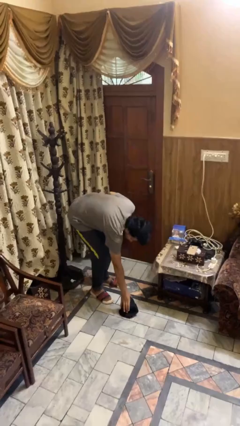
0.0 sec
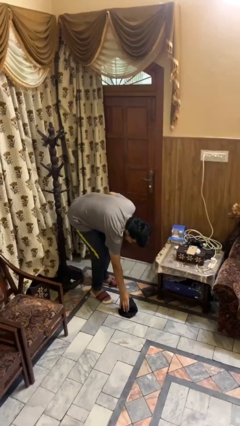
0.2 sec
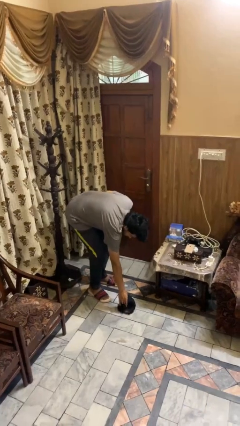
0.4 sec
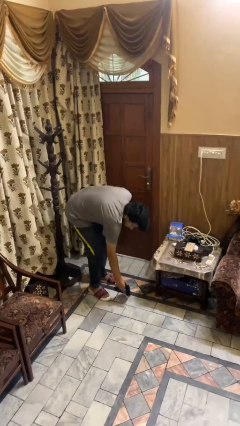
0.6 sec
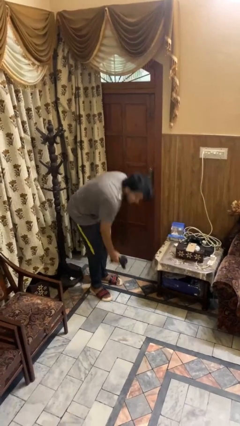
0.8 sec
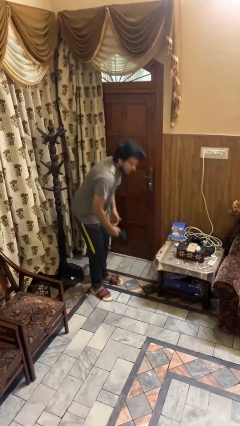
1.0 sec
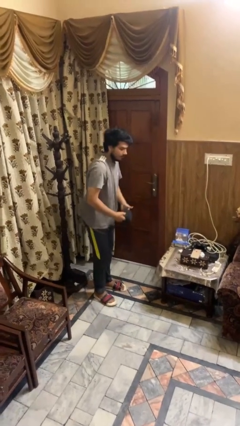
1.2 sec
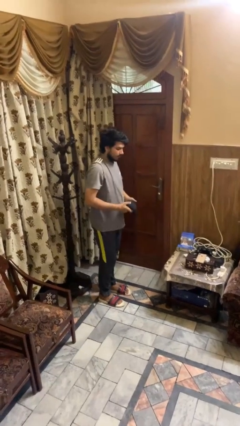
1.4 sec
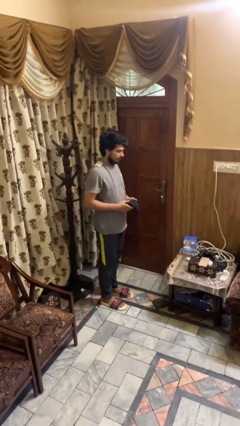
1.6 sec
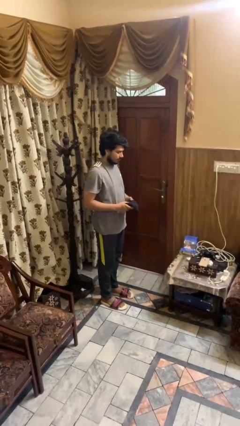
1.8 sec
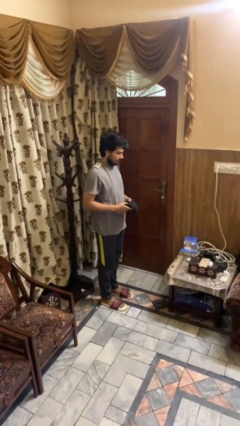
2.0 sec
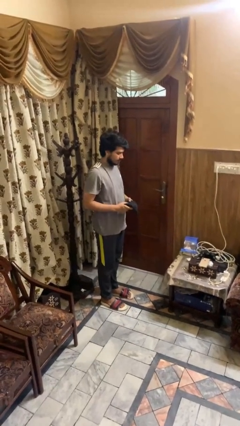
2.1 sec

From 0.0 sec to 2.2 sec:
person picks up object from floor

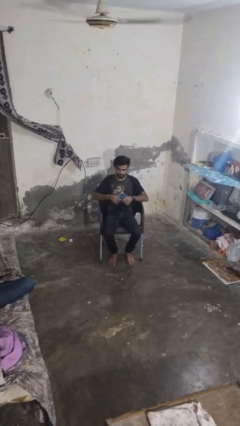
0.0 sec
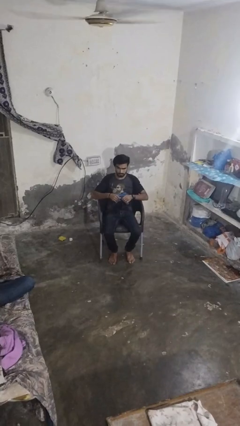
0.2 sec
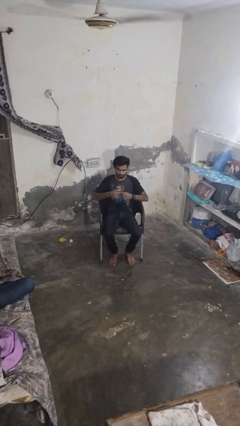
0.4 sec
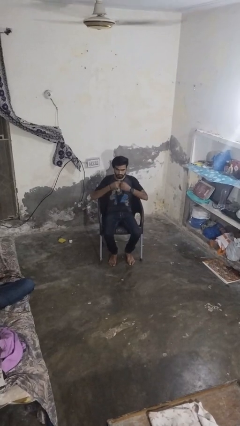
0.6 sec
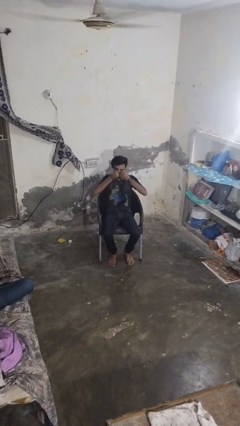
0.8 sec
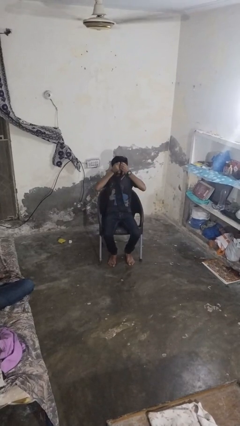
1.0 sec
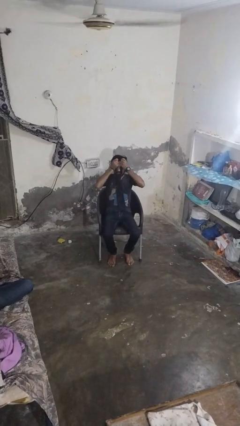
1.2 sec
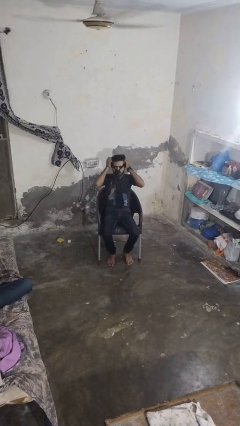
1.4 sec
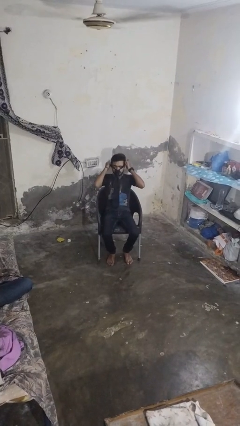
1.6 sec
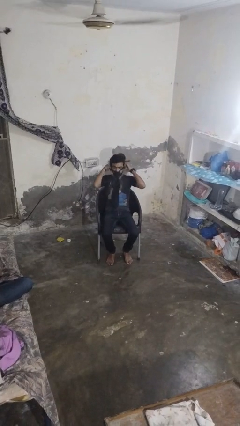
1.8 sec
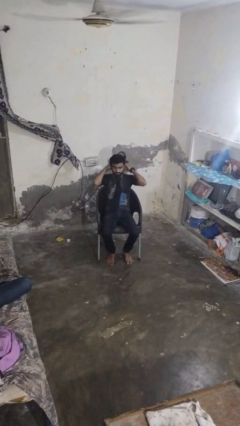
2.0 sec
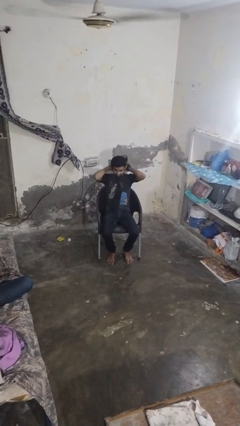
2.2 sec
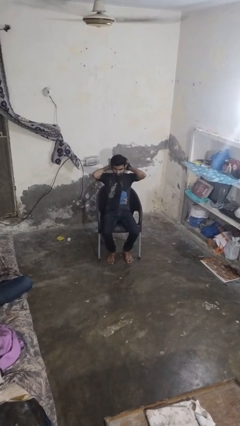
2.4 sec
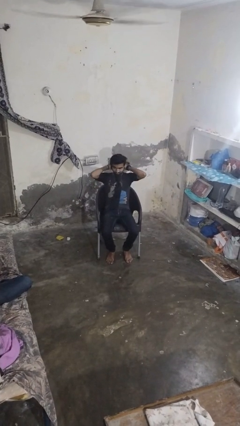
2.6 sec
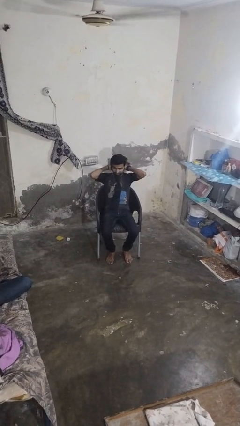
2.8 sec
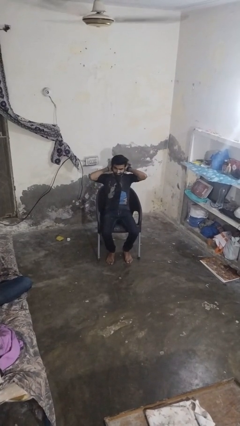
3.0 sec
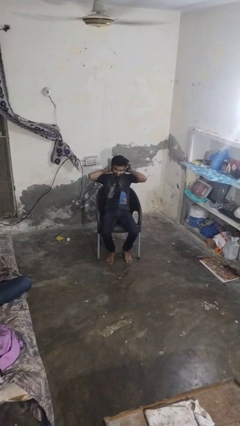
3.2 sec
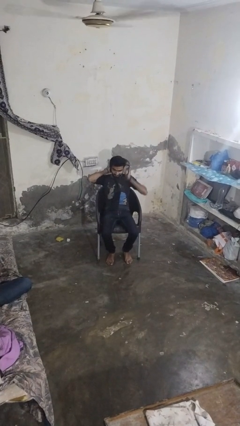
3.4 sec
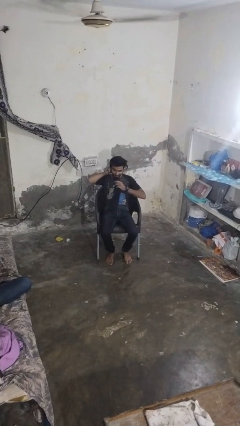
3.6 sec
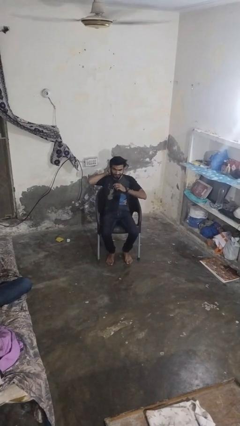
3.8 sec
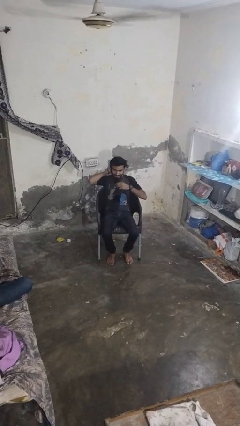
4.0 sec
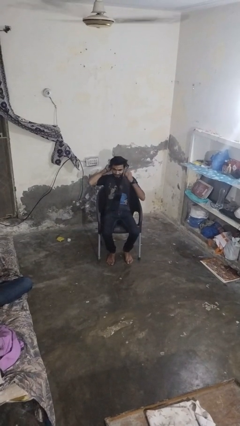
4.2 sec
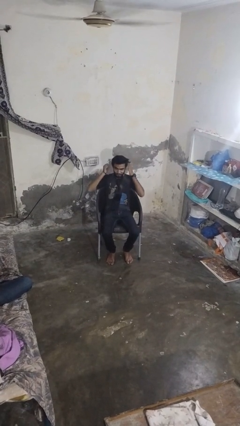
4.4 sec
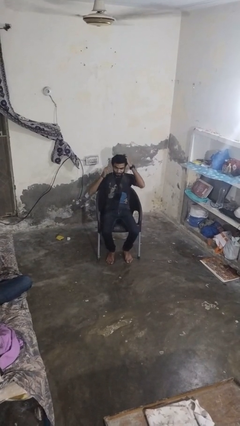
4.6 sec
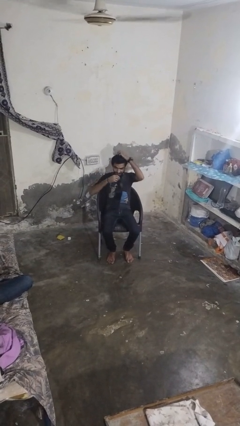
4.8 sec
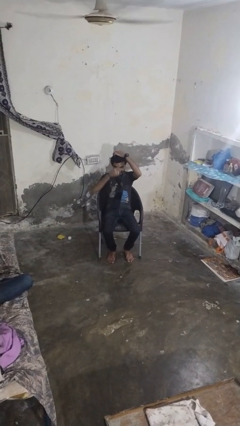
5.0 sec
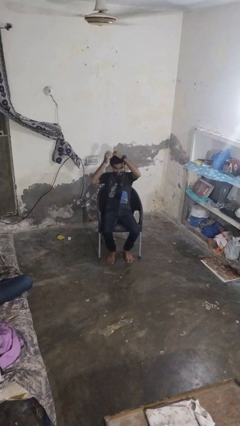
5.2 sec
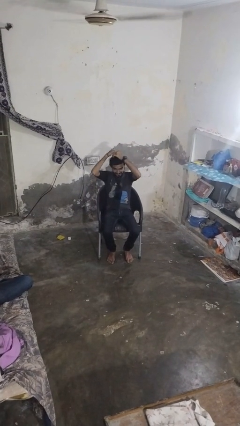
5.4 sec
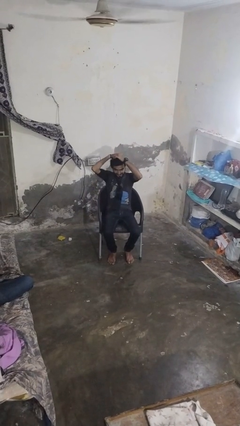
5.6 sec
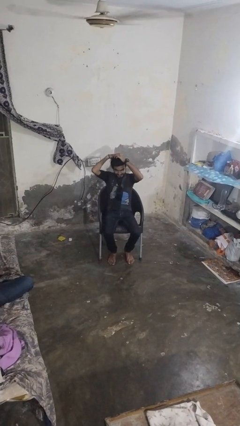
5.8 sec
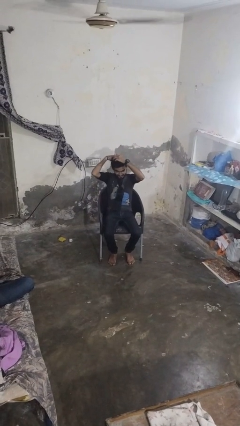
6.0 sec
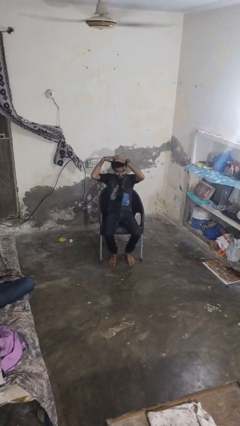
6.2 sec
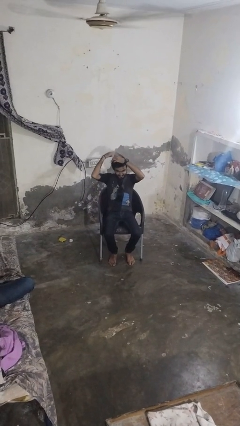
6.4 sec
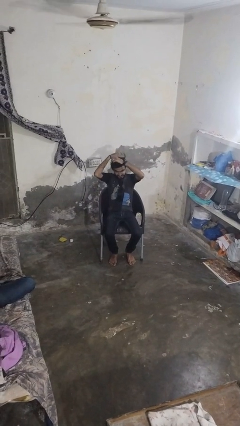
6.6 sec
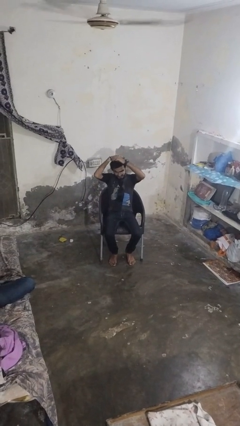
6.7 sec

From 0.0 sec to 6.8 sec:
person puts on necktie

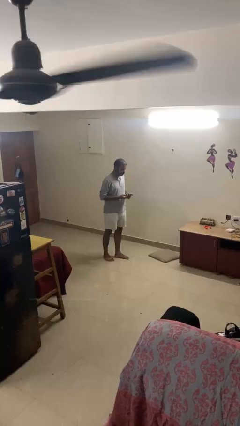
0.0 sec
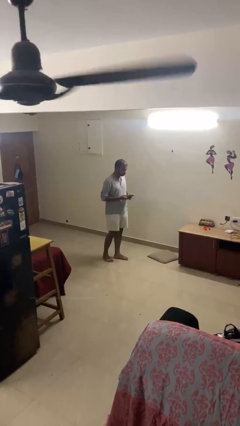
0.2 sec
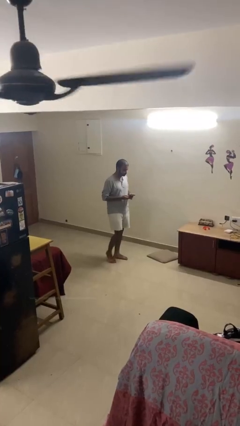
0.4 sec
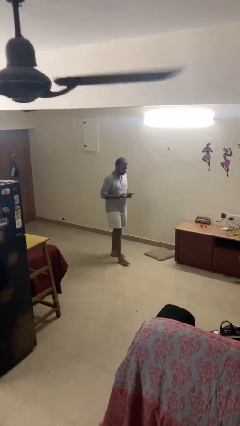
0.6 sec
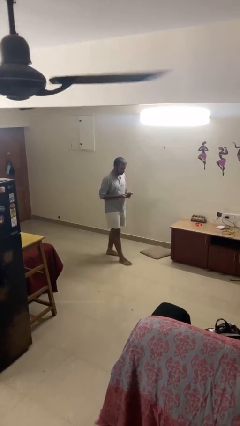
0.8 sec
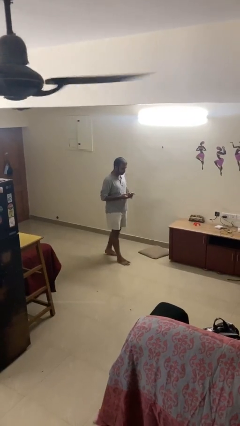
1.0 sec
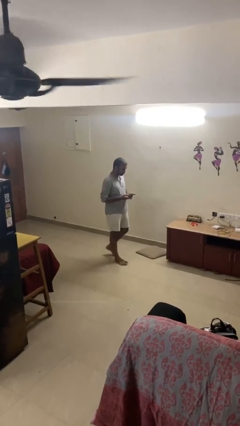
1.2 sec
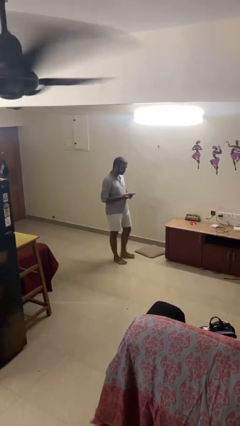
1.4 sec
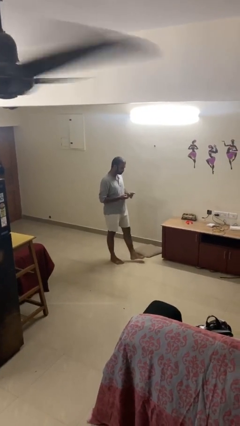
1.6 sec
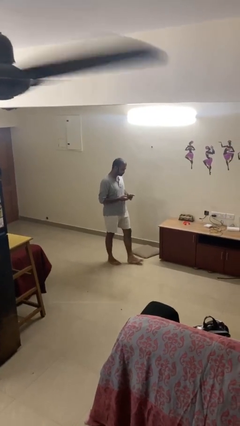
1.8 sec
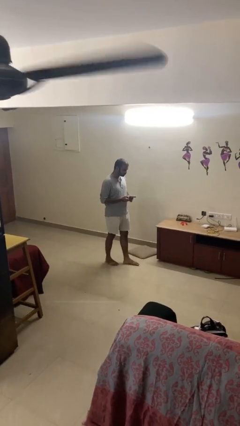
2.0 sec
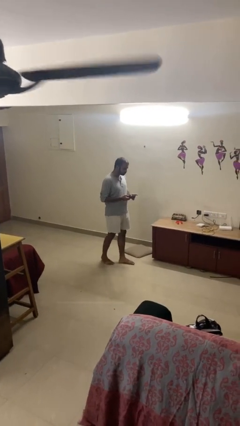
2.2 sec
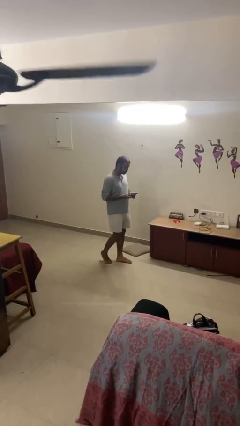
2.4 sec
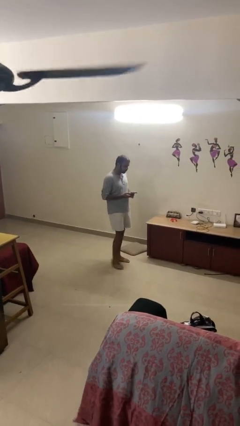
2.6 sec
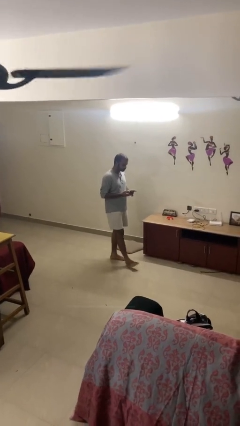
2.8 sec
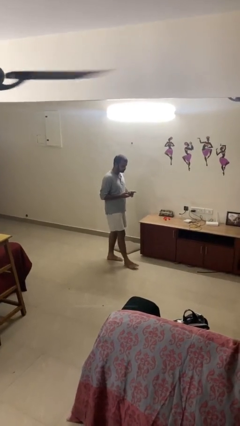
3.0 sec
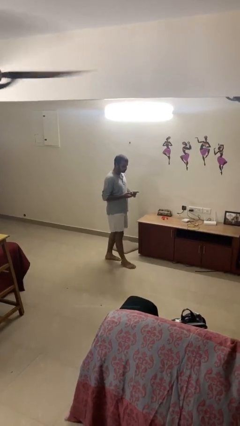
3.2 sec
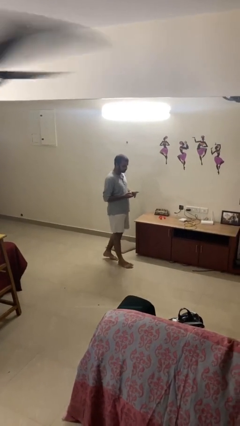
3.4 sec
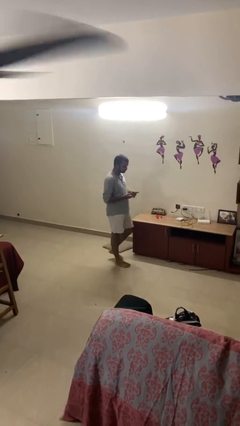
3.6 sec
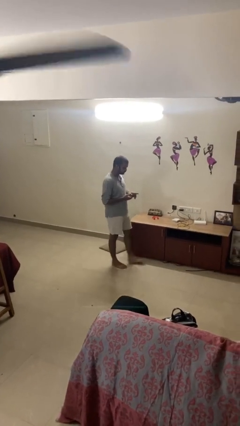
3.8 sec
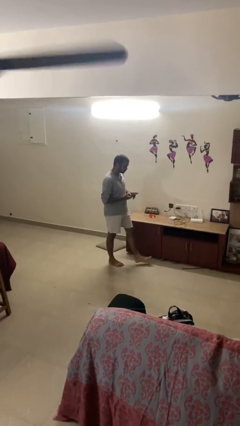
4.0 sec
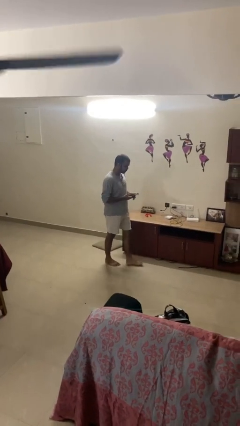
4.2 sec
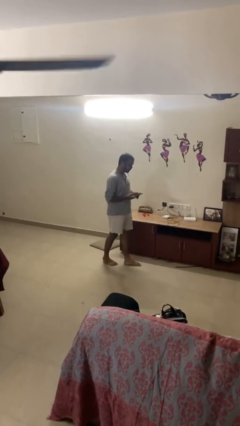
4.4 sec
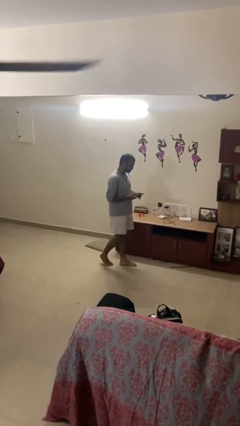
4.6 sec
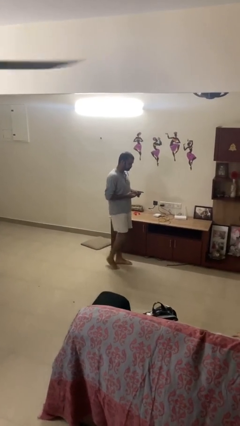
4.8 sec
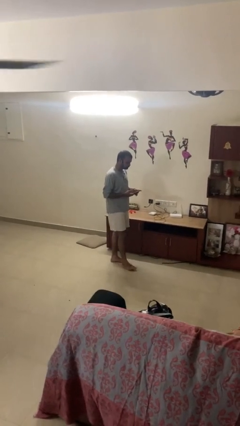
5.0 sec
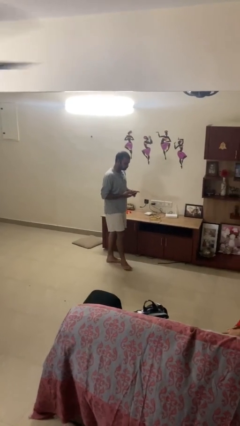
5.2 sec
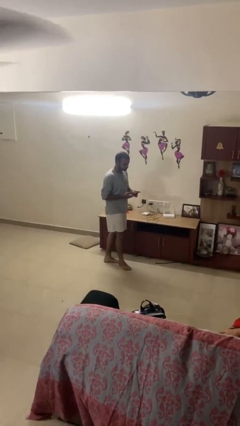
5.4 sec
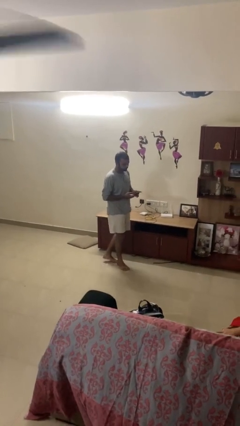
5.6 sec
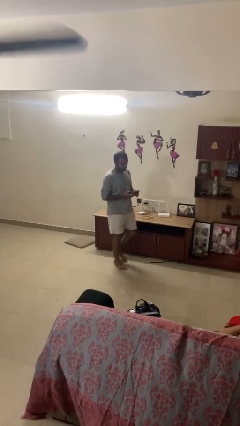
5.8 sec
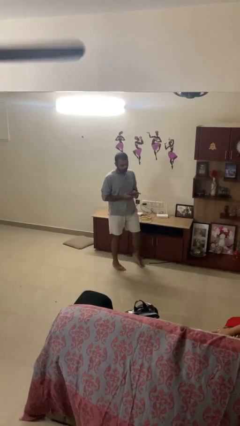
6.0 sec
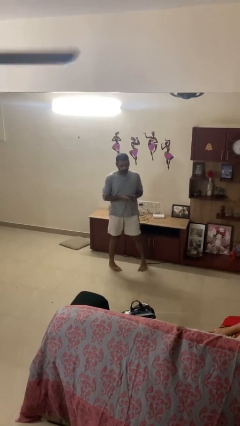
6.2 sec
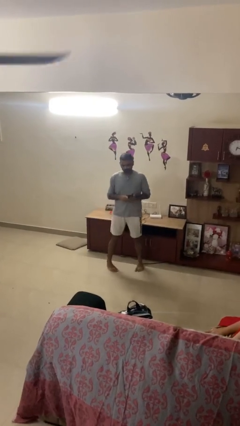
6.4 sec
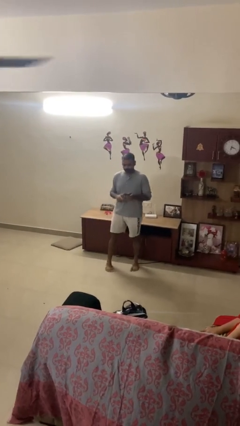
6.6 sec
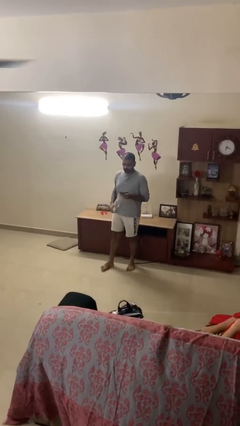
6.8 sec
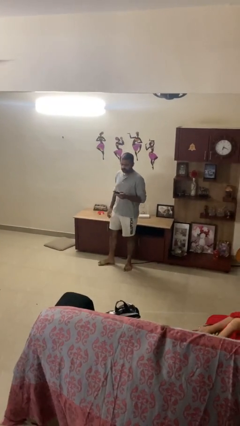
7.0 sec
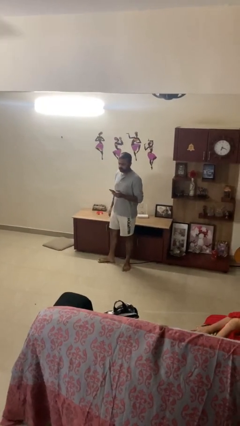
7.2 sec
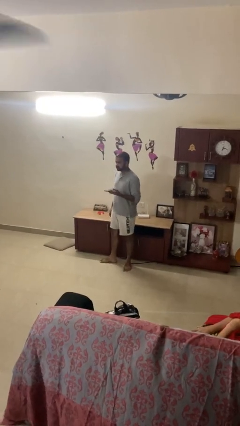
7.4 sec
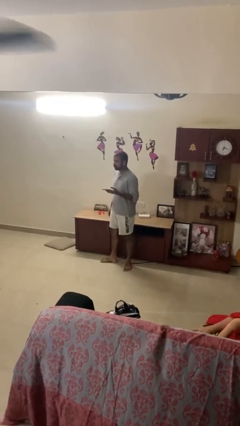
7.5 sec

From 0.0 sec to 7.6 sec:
person texts on phone

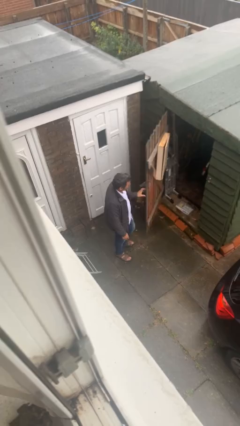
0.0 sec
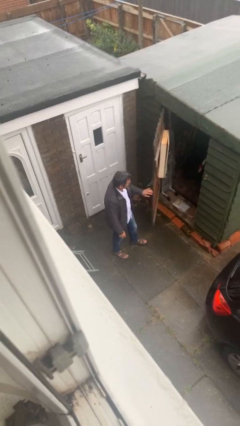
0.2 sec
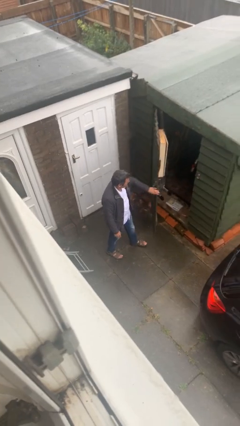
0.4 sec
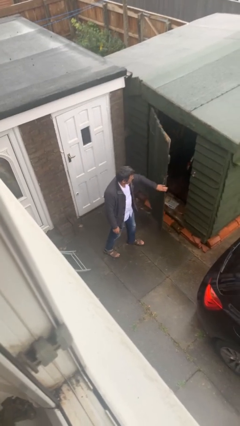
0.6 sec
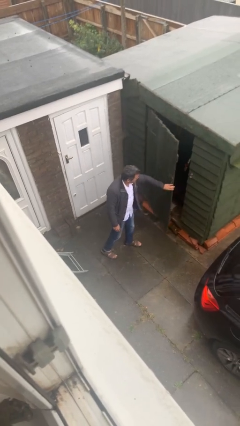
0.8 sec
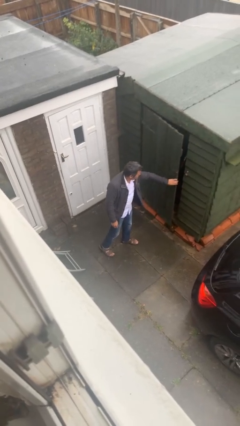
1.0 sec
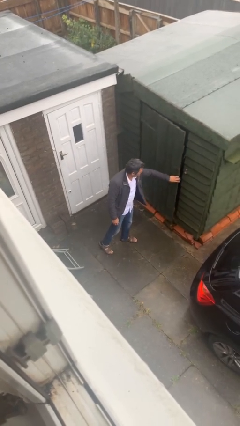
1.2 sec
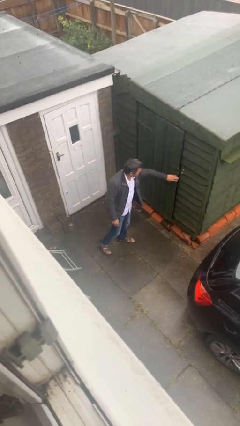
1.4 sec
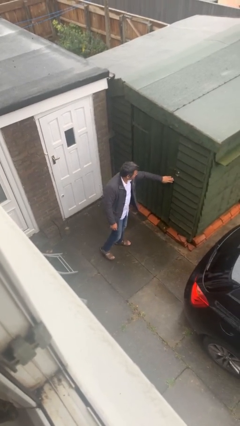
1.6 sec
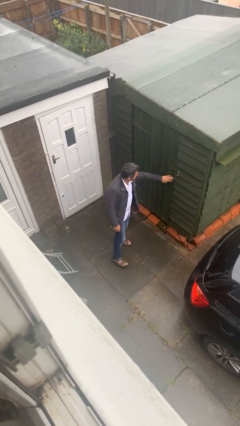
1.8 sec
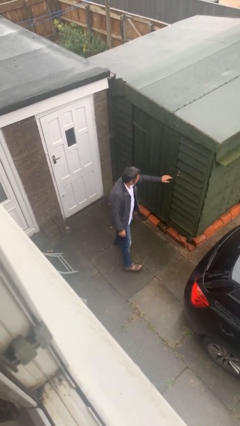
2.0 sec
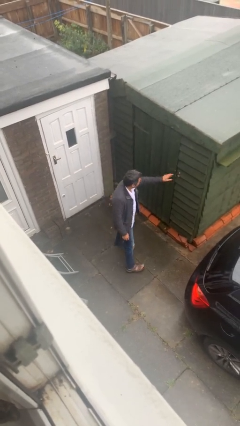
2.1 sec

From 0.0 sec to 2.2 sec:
person closes facility door
